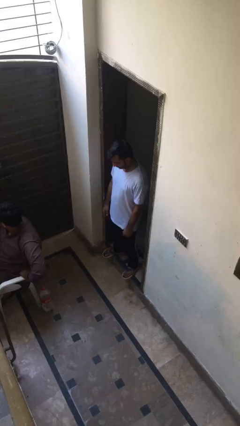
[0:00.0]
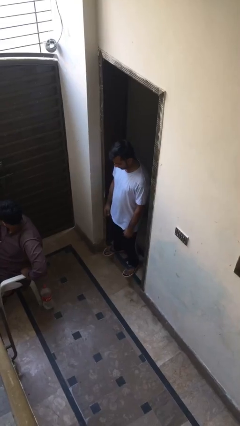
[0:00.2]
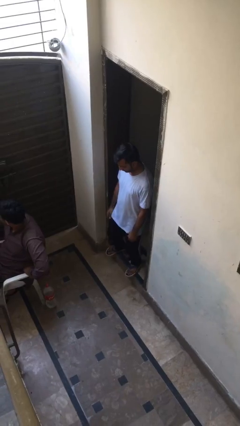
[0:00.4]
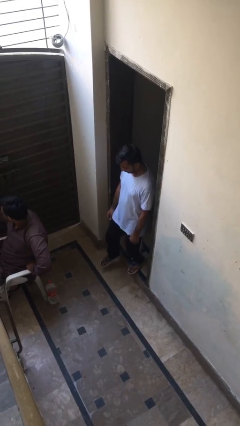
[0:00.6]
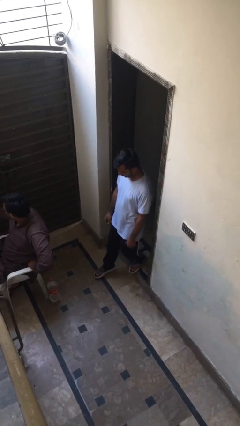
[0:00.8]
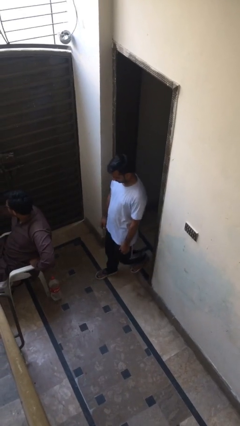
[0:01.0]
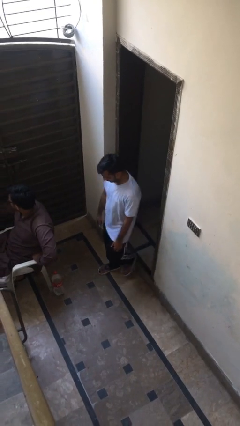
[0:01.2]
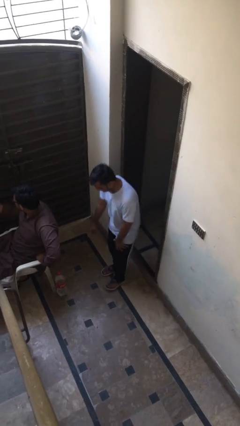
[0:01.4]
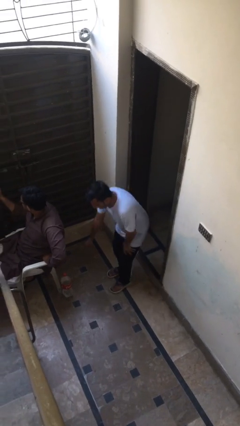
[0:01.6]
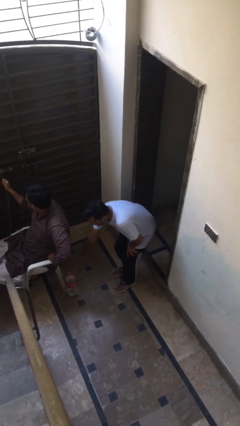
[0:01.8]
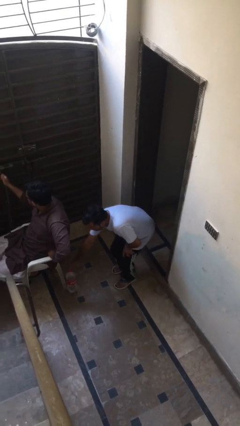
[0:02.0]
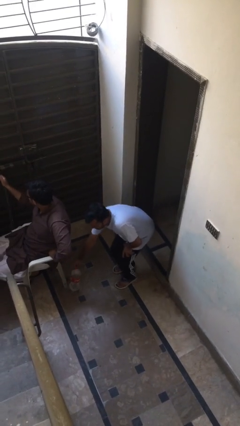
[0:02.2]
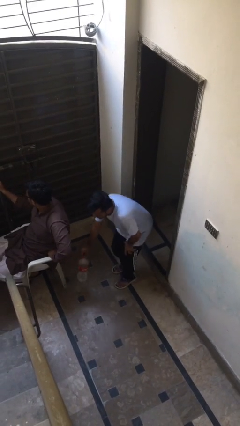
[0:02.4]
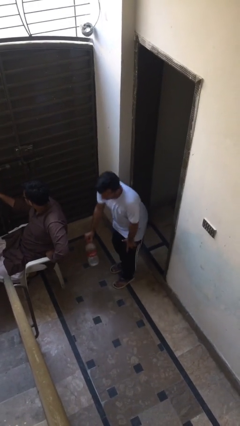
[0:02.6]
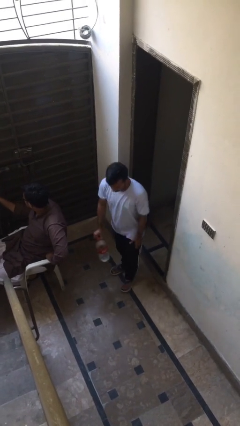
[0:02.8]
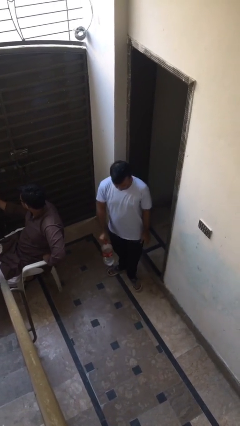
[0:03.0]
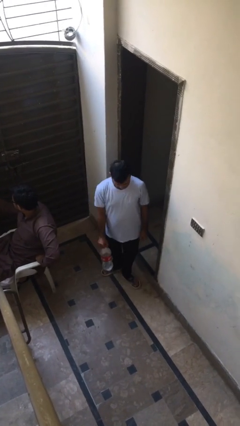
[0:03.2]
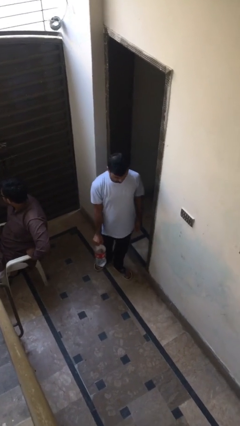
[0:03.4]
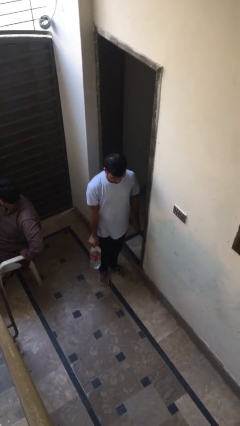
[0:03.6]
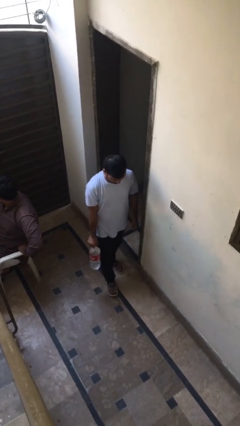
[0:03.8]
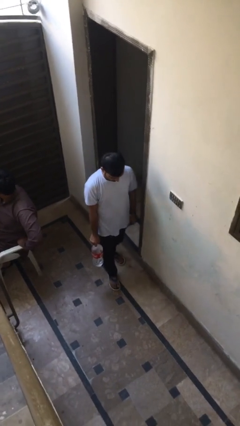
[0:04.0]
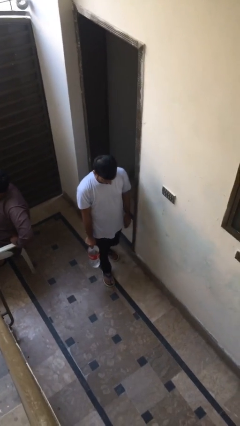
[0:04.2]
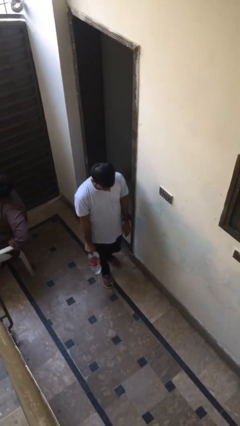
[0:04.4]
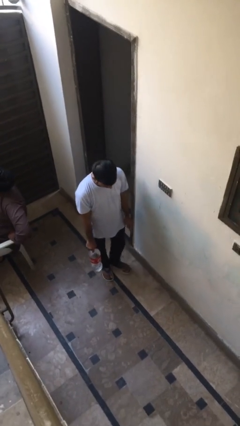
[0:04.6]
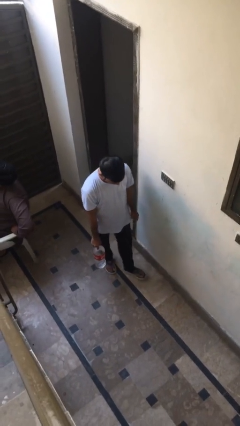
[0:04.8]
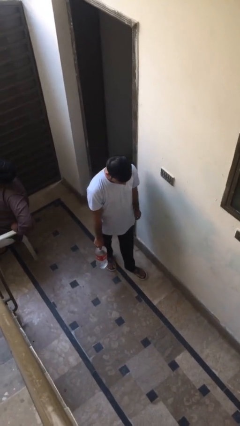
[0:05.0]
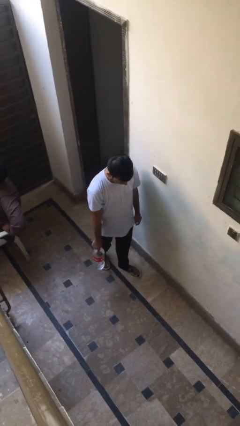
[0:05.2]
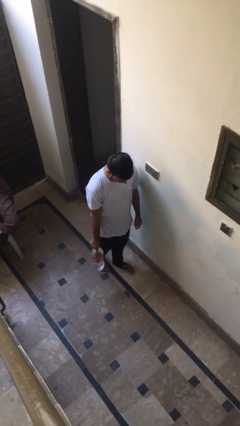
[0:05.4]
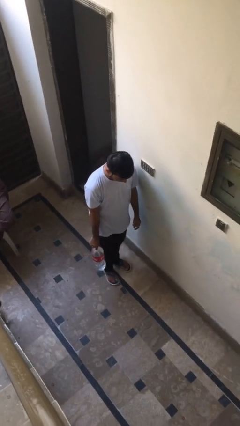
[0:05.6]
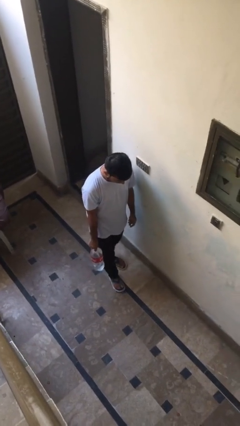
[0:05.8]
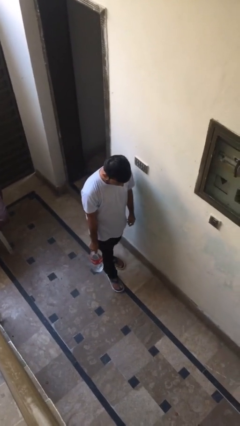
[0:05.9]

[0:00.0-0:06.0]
person steals object from person

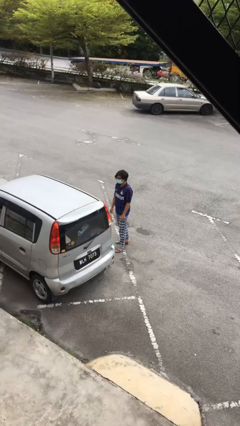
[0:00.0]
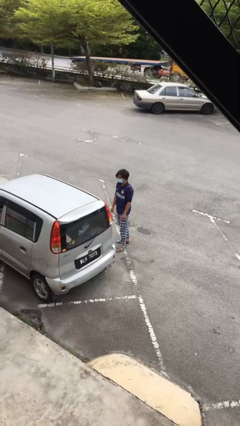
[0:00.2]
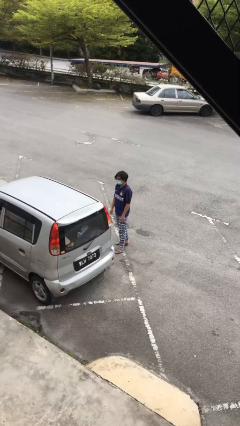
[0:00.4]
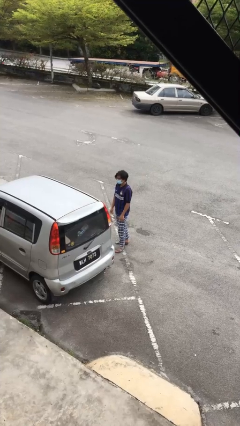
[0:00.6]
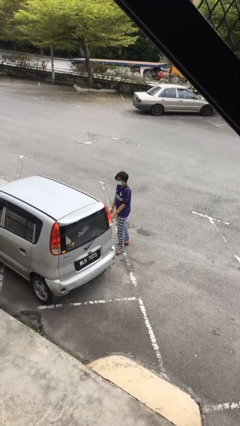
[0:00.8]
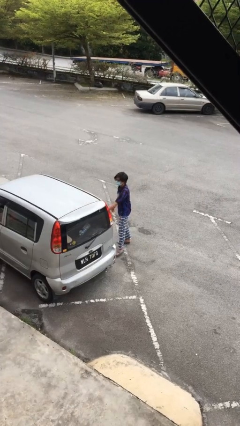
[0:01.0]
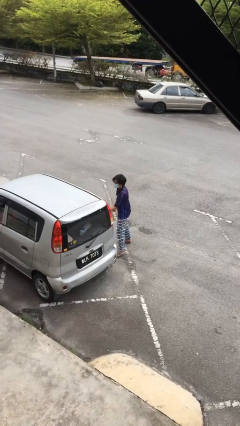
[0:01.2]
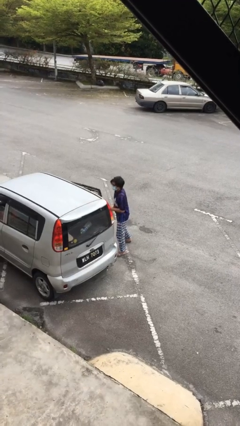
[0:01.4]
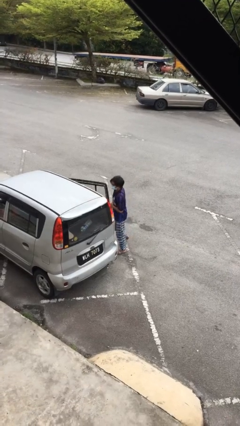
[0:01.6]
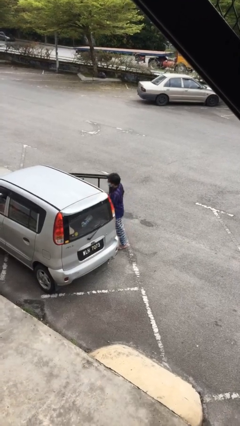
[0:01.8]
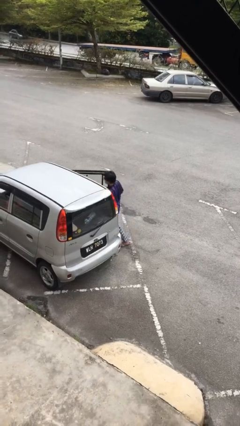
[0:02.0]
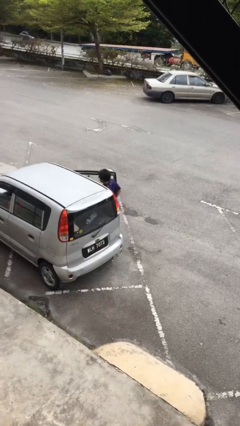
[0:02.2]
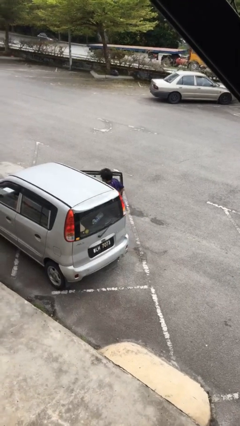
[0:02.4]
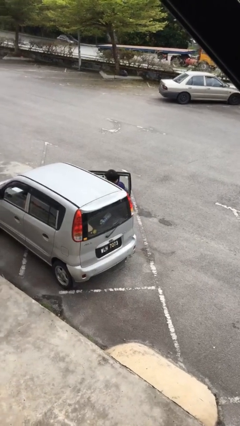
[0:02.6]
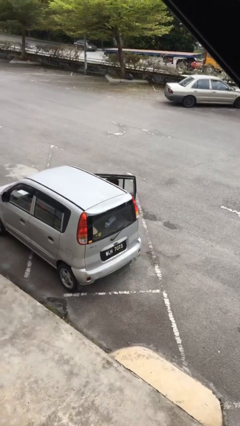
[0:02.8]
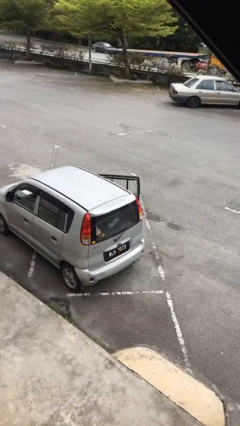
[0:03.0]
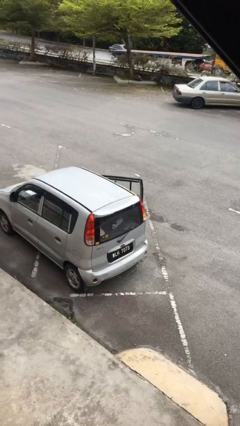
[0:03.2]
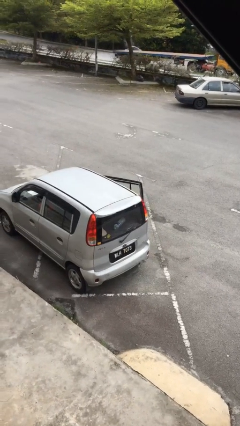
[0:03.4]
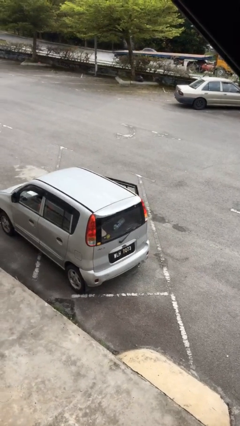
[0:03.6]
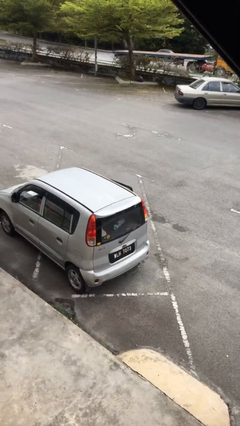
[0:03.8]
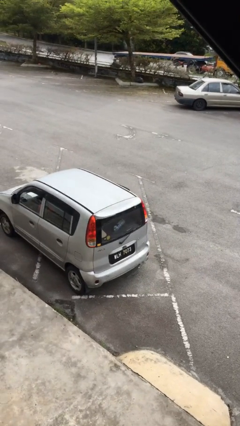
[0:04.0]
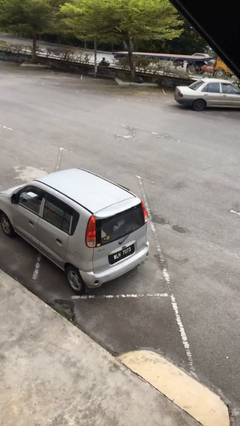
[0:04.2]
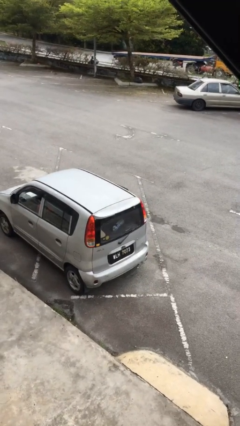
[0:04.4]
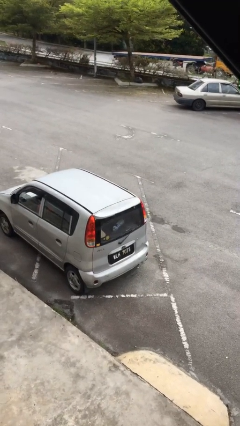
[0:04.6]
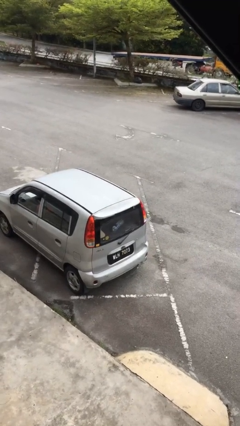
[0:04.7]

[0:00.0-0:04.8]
person enters car

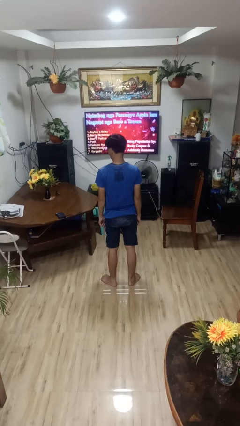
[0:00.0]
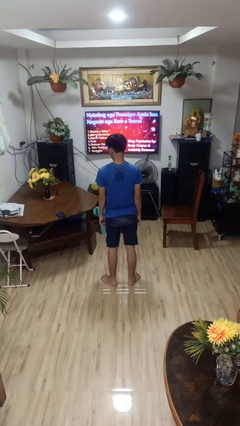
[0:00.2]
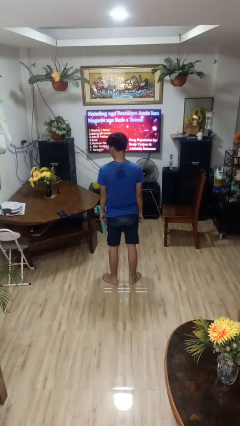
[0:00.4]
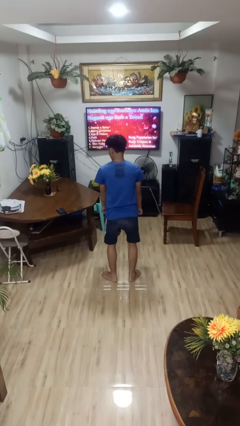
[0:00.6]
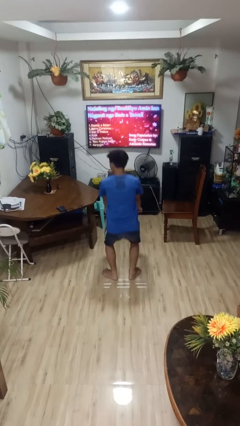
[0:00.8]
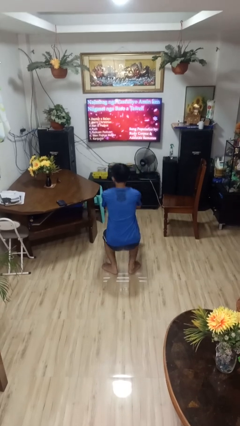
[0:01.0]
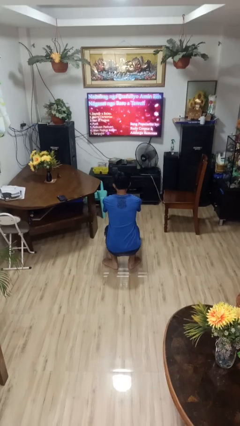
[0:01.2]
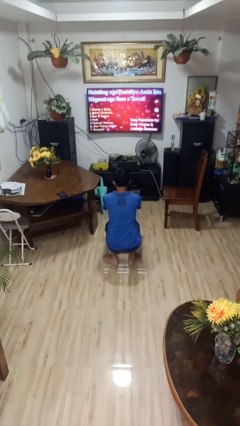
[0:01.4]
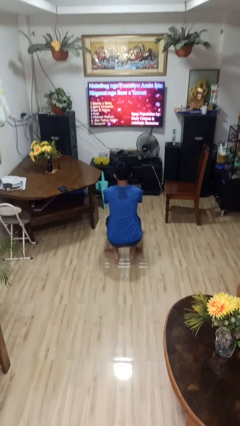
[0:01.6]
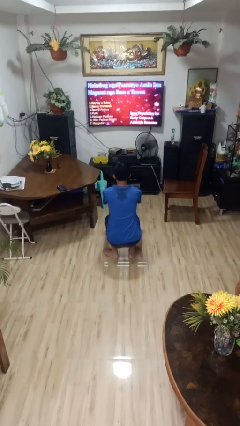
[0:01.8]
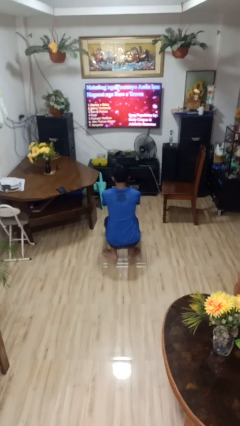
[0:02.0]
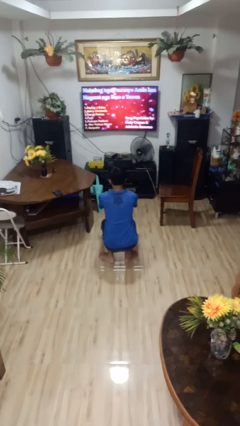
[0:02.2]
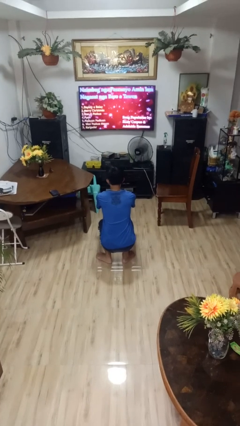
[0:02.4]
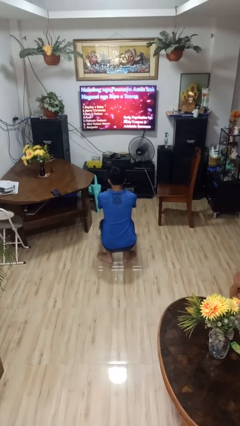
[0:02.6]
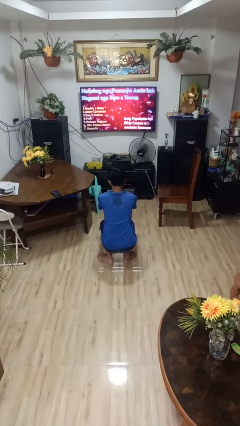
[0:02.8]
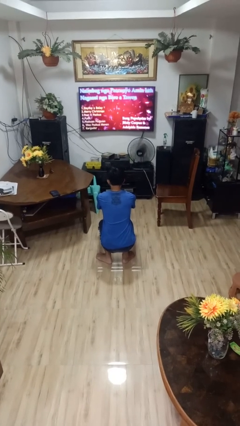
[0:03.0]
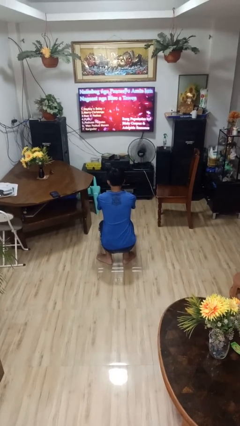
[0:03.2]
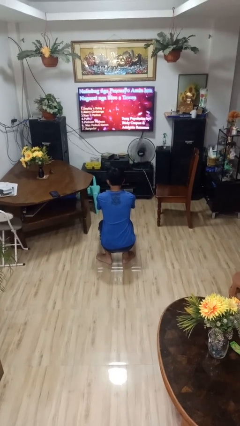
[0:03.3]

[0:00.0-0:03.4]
person squats

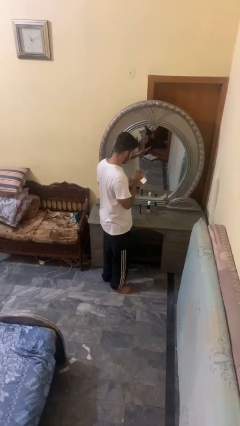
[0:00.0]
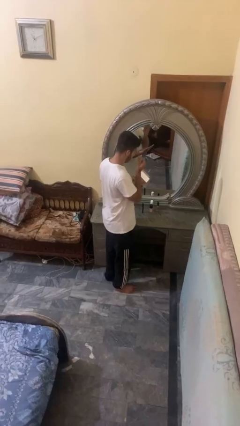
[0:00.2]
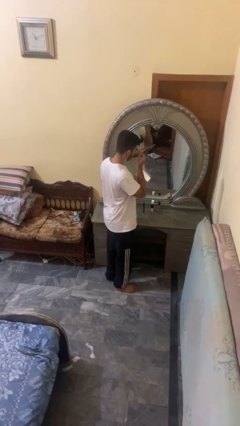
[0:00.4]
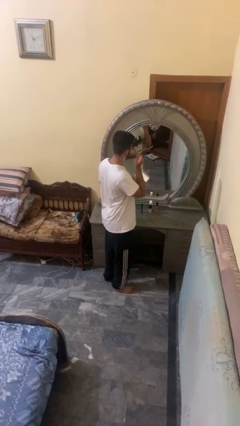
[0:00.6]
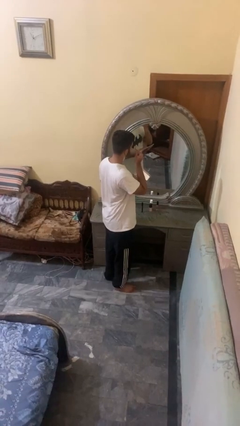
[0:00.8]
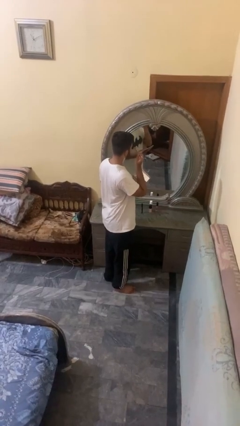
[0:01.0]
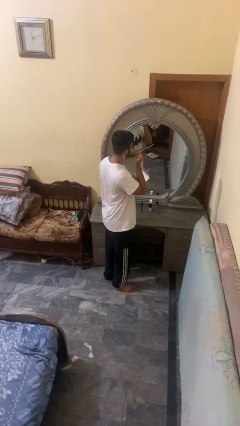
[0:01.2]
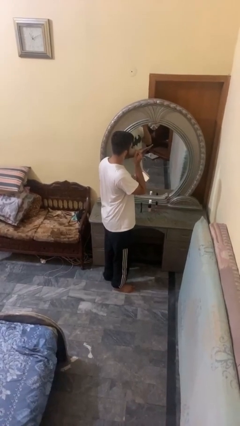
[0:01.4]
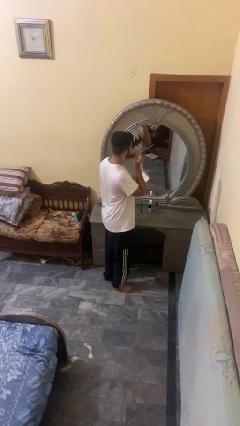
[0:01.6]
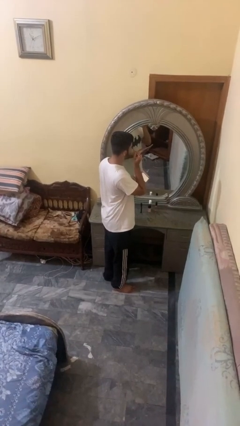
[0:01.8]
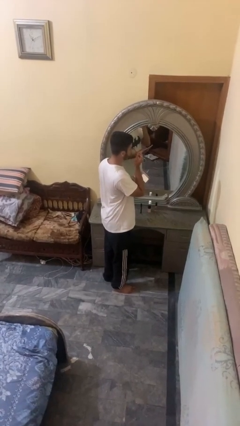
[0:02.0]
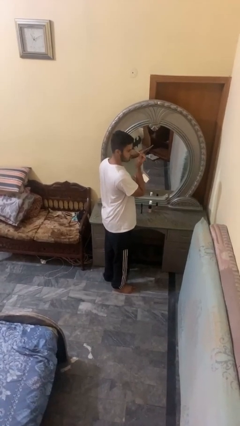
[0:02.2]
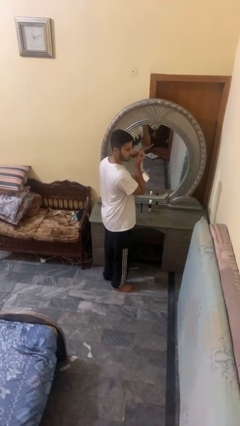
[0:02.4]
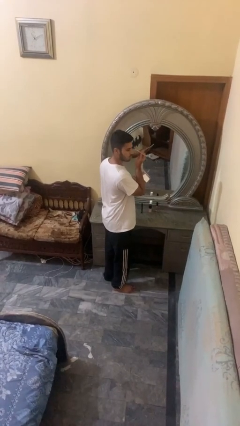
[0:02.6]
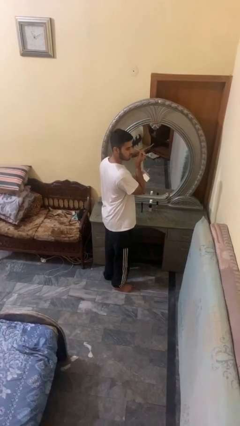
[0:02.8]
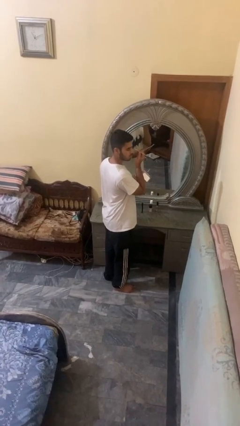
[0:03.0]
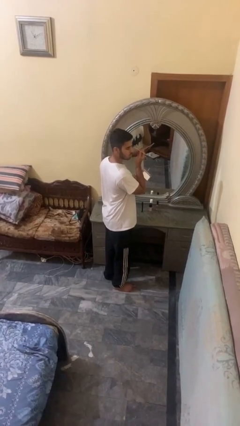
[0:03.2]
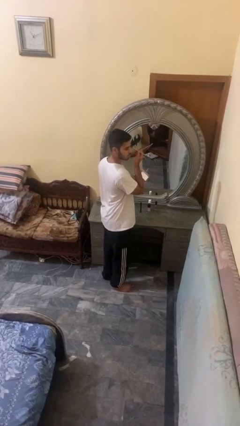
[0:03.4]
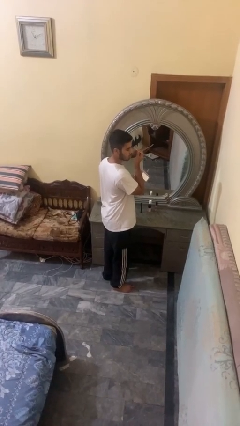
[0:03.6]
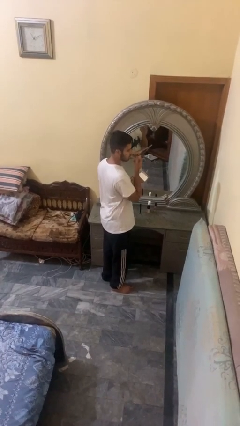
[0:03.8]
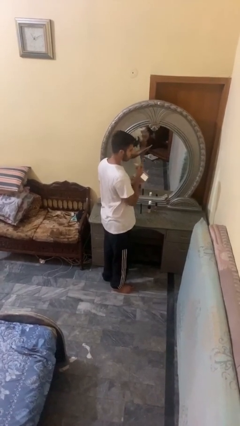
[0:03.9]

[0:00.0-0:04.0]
person applies eye makeup
